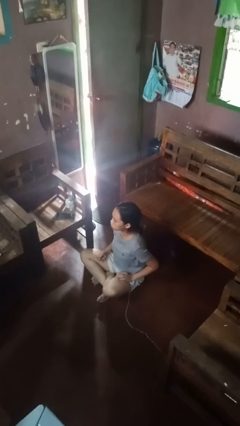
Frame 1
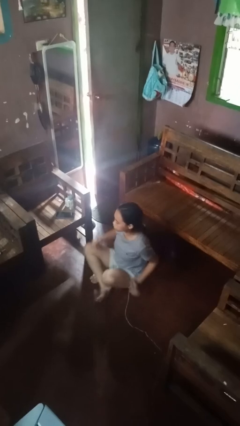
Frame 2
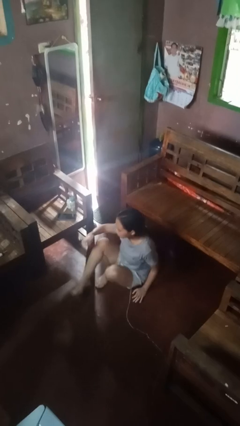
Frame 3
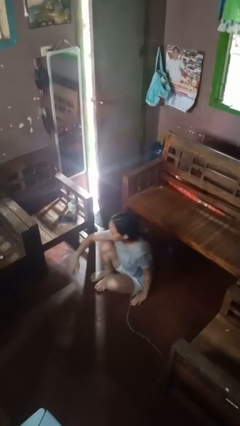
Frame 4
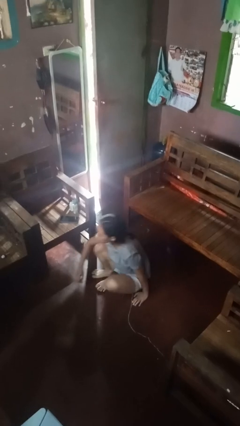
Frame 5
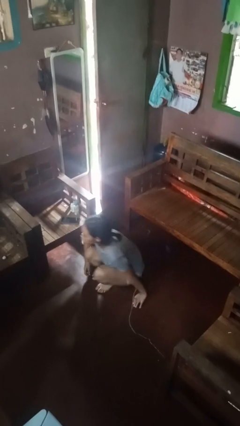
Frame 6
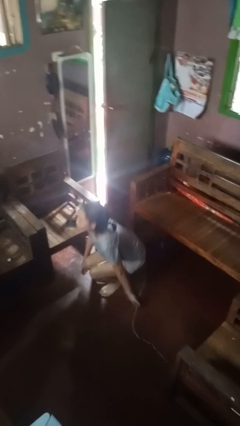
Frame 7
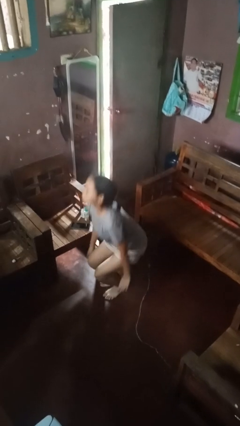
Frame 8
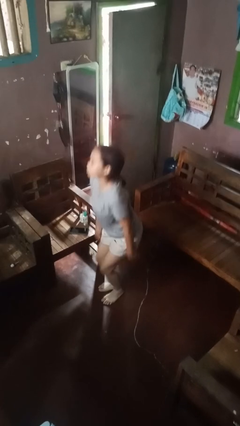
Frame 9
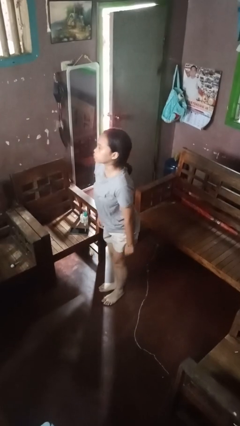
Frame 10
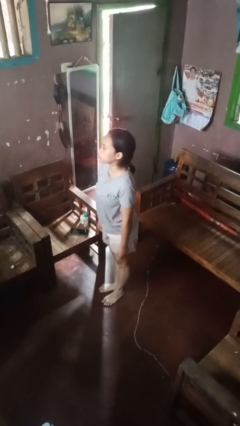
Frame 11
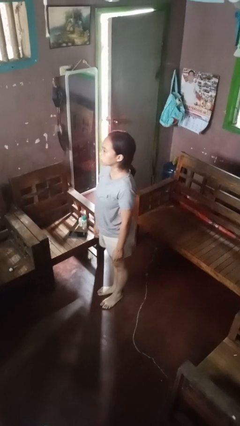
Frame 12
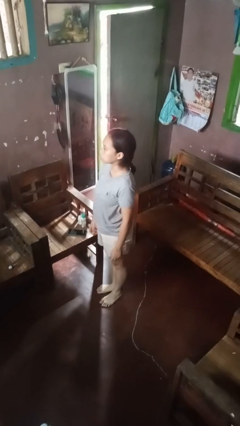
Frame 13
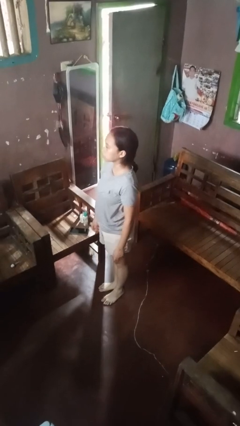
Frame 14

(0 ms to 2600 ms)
person stands up from floor

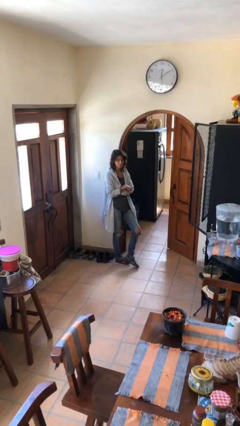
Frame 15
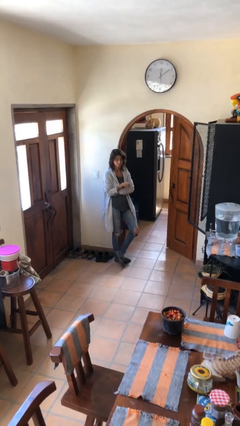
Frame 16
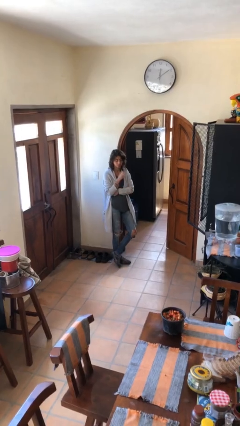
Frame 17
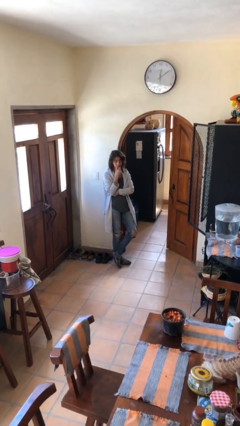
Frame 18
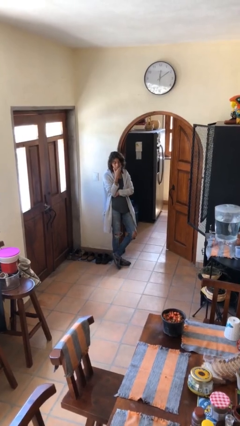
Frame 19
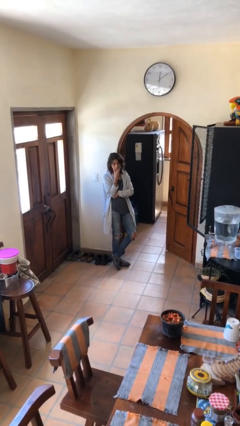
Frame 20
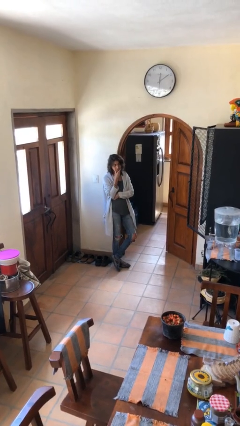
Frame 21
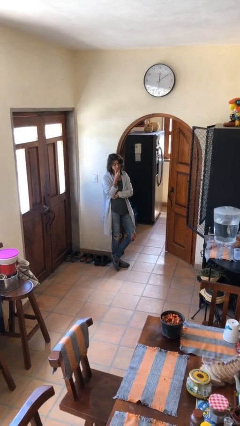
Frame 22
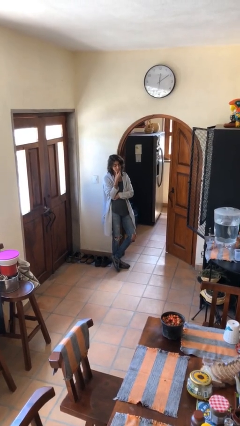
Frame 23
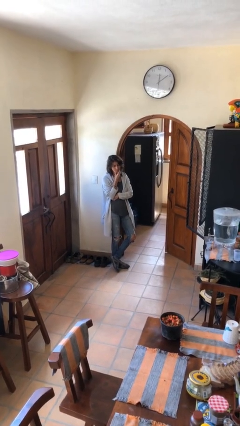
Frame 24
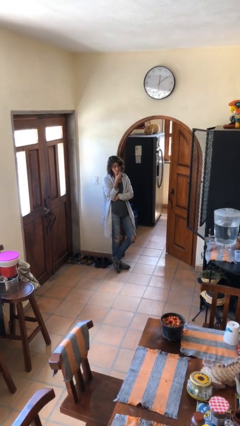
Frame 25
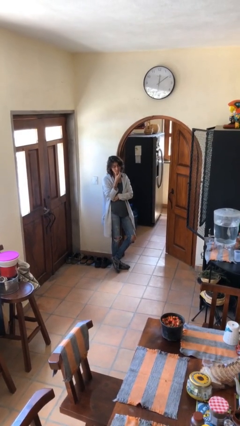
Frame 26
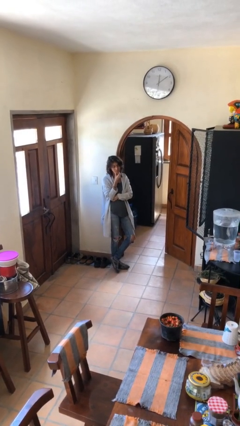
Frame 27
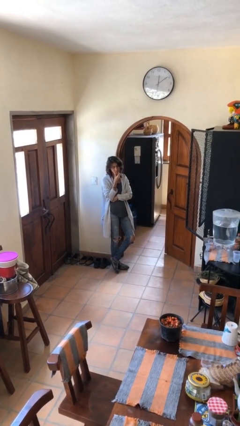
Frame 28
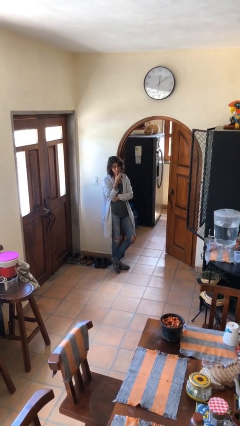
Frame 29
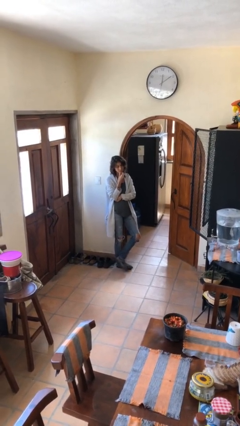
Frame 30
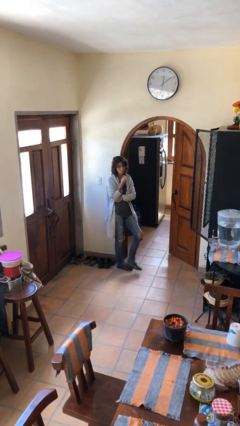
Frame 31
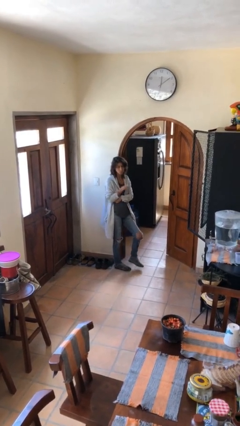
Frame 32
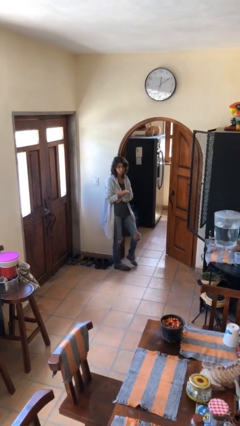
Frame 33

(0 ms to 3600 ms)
person strokes chin

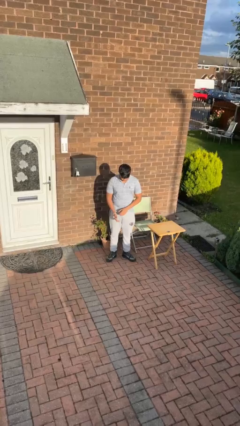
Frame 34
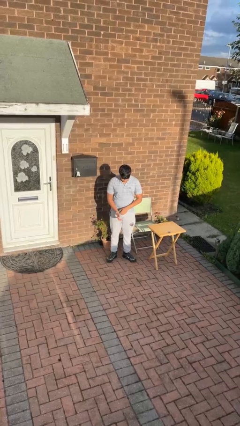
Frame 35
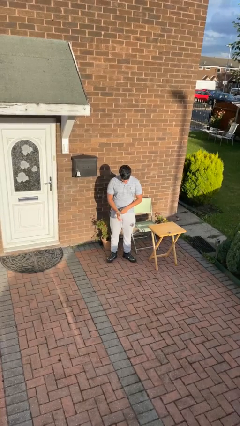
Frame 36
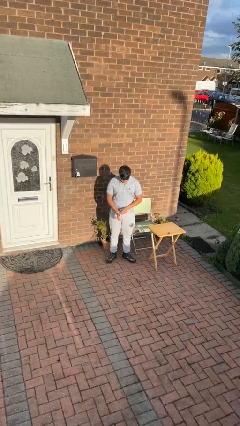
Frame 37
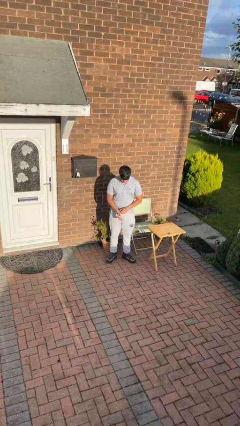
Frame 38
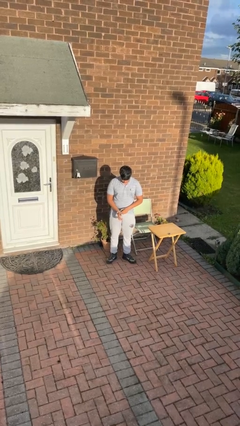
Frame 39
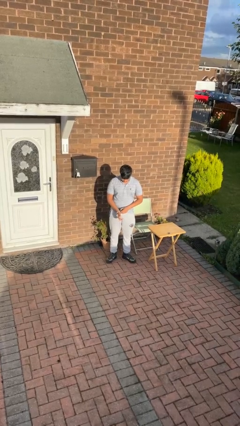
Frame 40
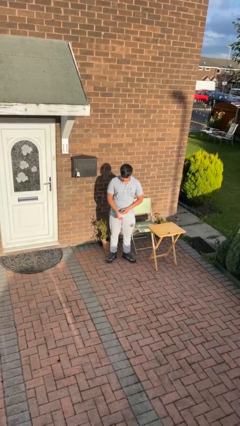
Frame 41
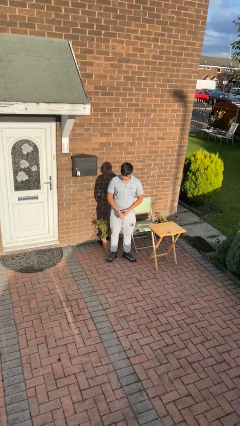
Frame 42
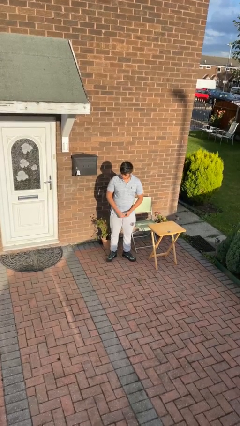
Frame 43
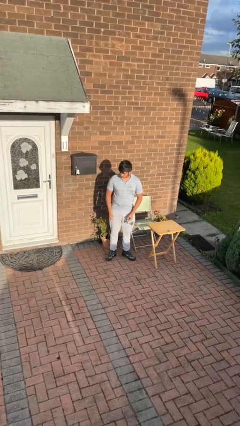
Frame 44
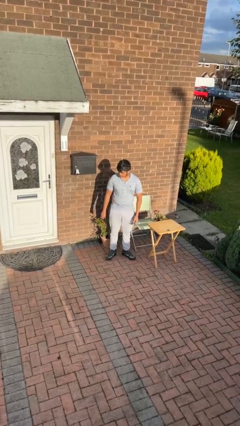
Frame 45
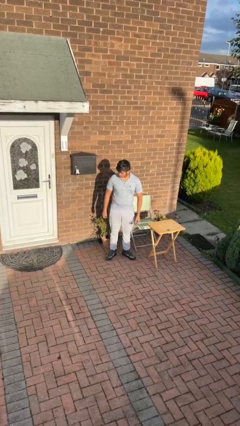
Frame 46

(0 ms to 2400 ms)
person takes off wristwatch

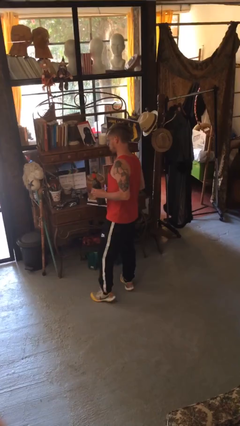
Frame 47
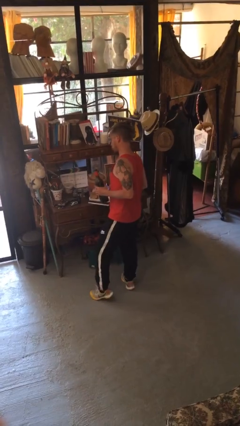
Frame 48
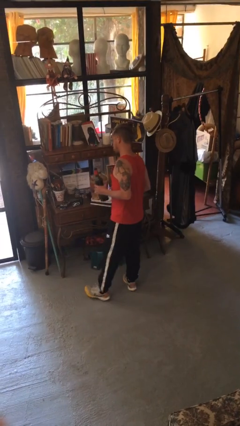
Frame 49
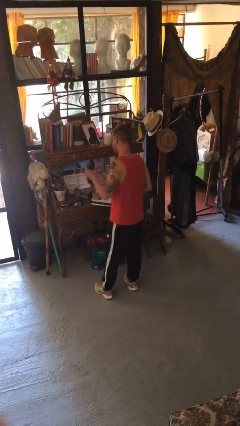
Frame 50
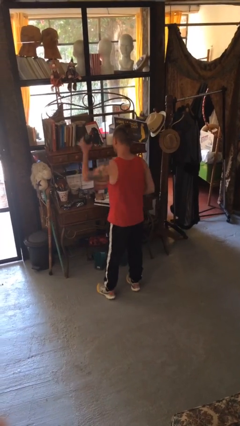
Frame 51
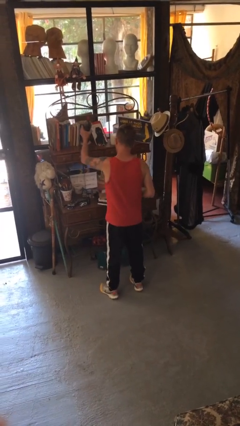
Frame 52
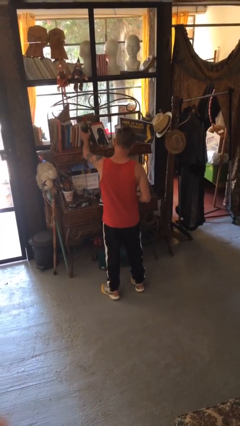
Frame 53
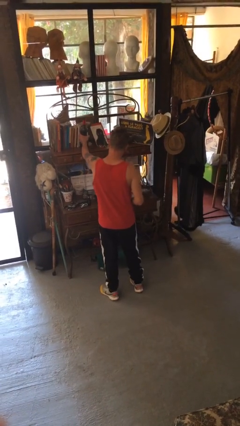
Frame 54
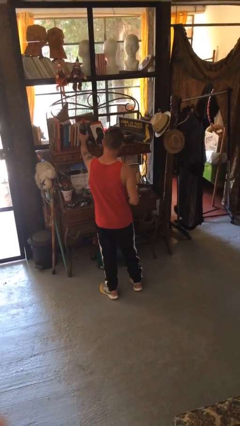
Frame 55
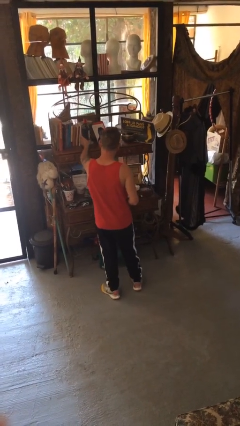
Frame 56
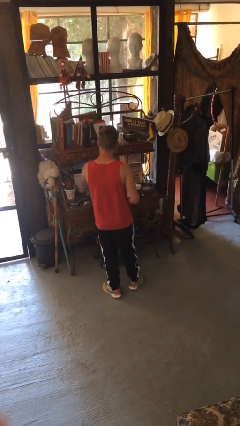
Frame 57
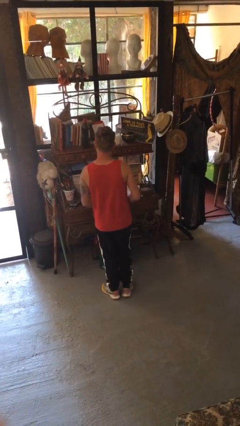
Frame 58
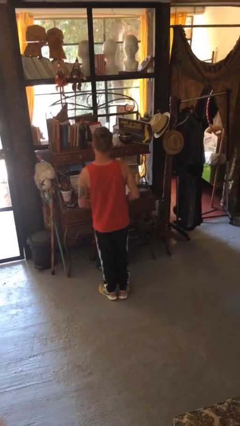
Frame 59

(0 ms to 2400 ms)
person puts down object on shelf

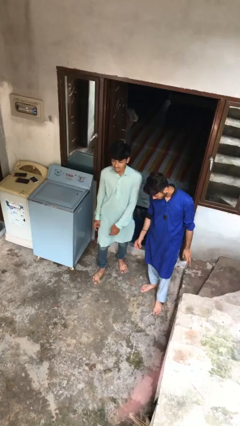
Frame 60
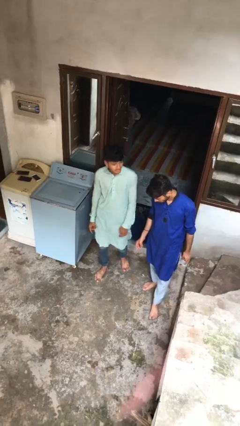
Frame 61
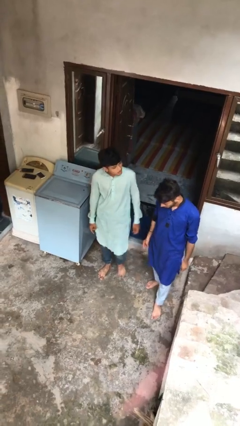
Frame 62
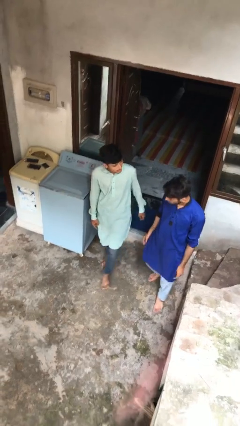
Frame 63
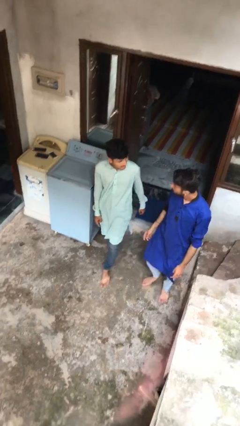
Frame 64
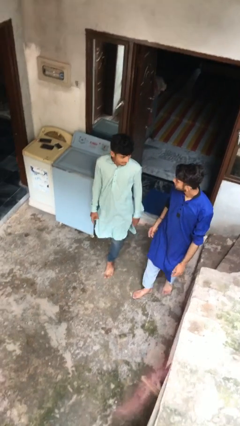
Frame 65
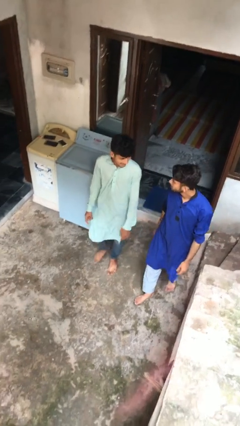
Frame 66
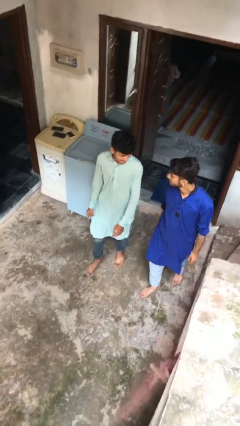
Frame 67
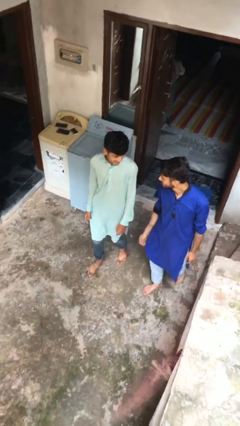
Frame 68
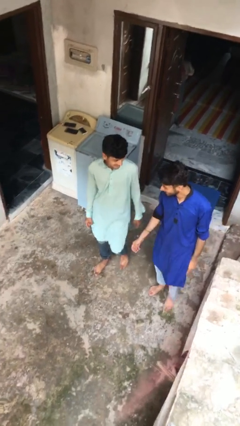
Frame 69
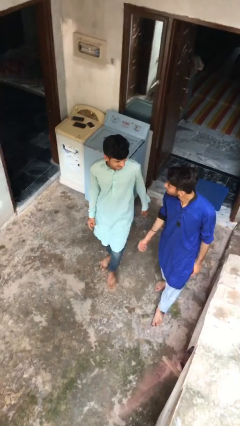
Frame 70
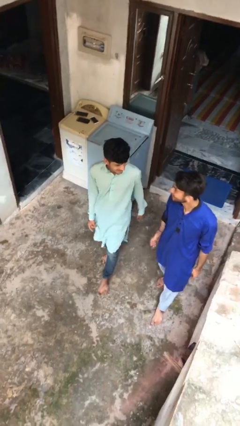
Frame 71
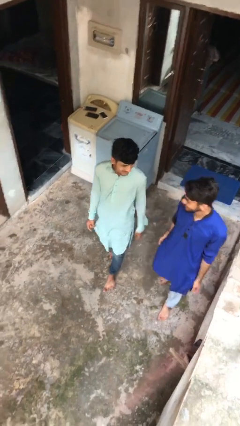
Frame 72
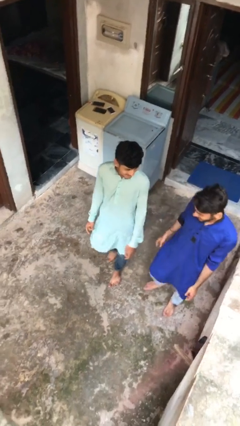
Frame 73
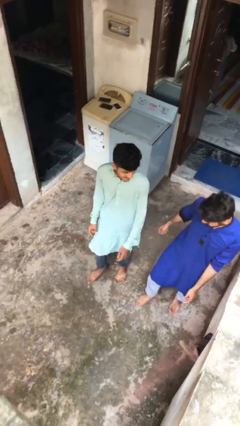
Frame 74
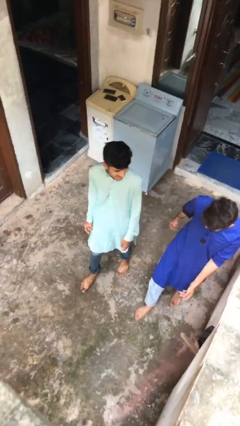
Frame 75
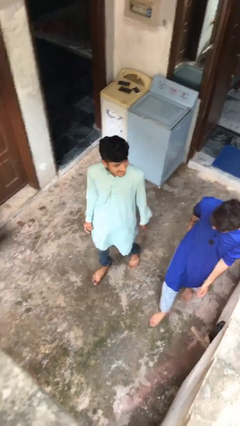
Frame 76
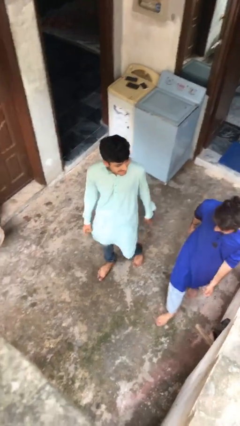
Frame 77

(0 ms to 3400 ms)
person talks to person

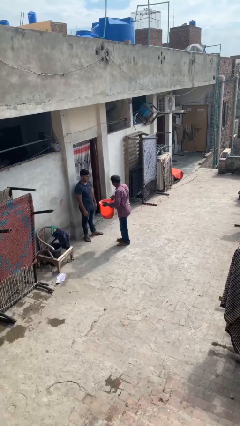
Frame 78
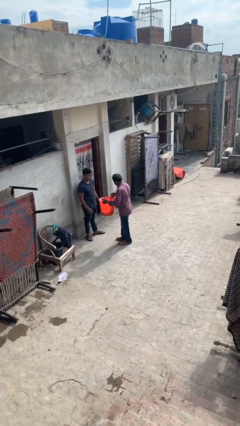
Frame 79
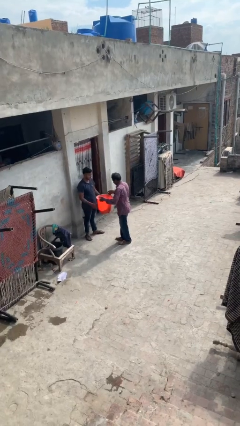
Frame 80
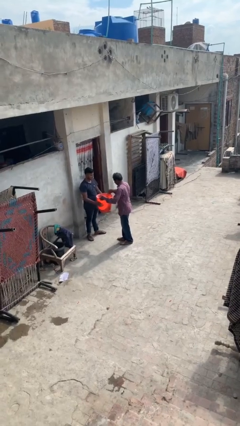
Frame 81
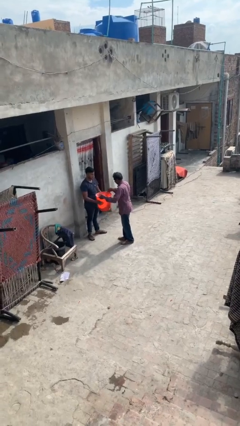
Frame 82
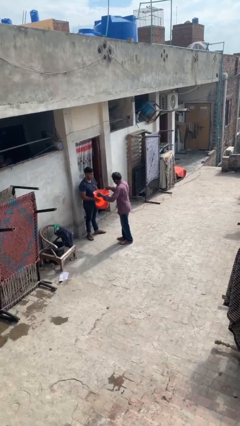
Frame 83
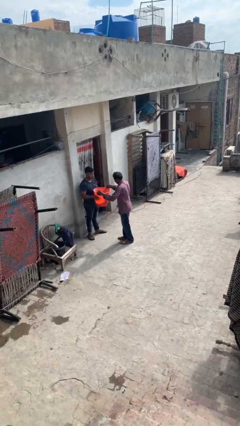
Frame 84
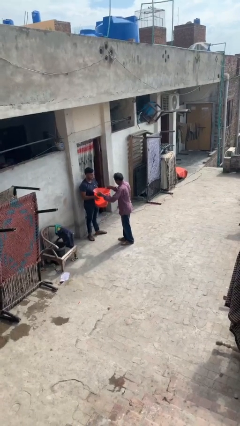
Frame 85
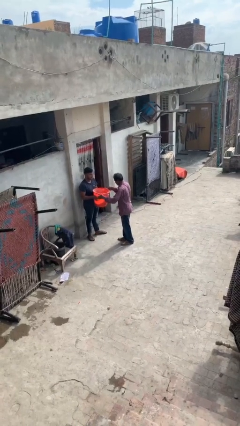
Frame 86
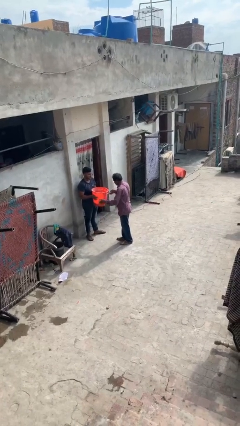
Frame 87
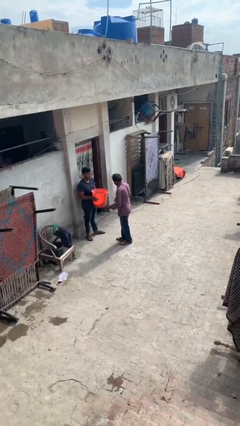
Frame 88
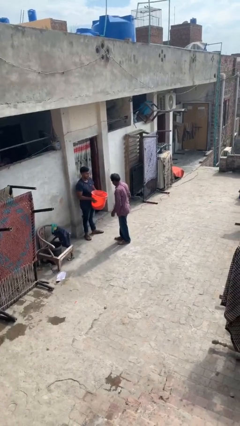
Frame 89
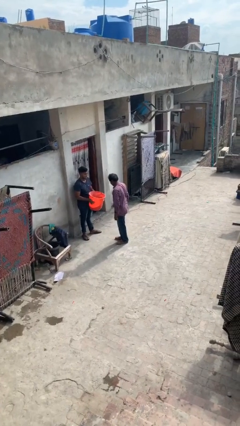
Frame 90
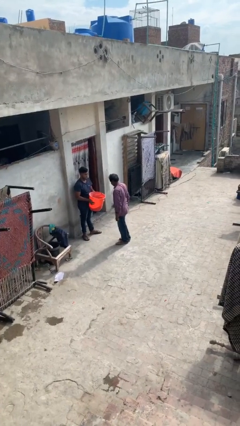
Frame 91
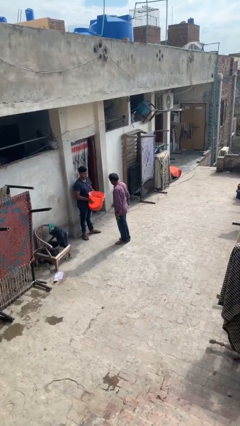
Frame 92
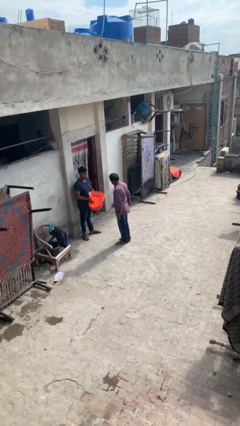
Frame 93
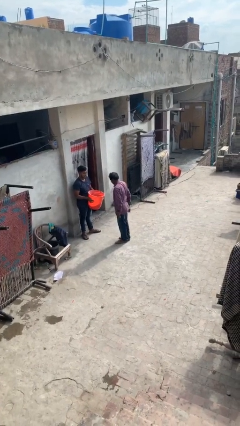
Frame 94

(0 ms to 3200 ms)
person transfers object to person

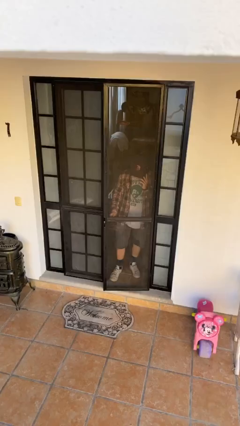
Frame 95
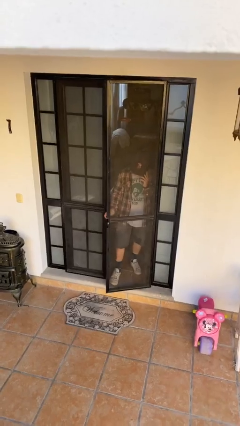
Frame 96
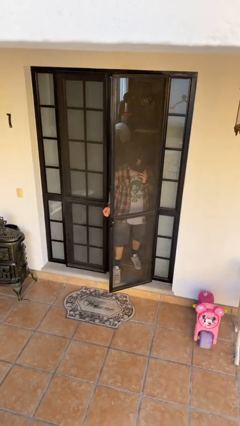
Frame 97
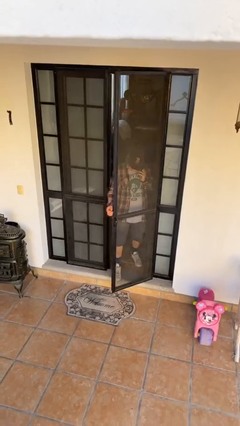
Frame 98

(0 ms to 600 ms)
person opens facility door
